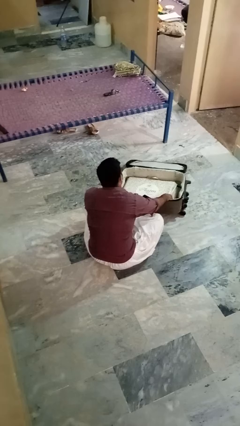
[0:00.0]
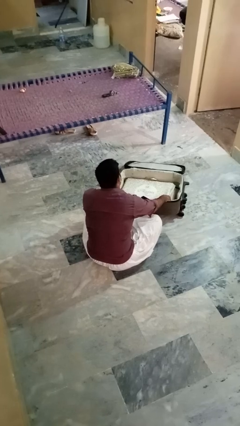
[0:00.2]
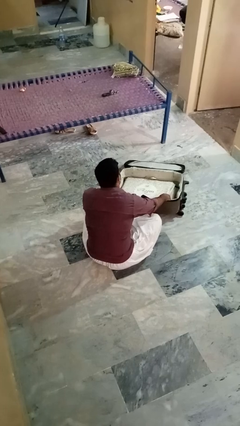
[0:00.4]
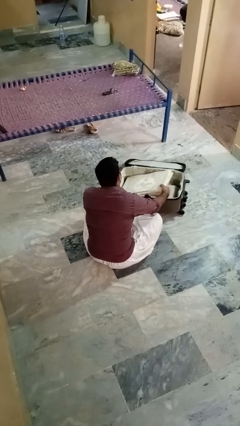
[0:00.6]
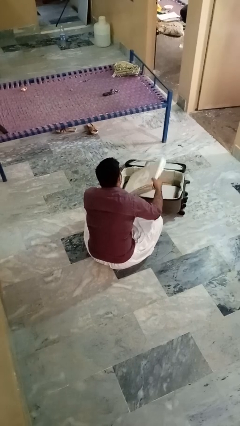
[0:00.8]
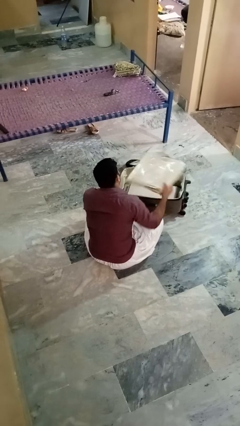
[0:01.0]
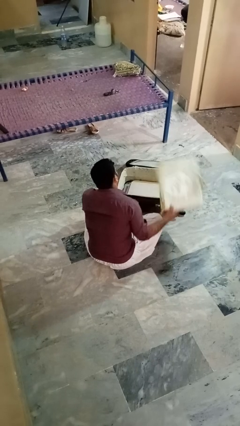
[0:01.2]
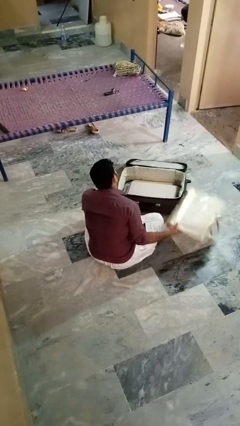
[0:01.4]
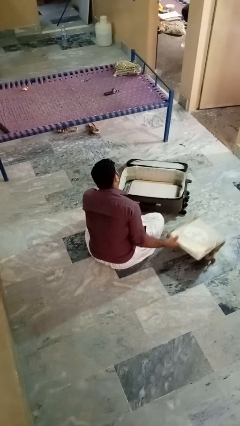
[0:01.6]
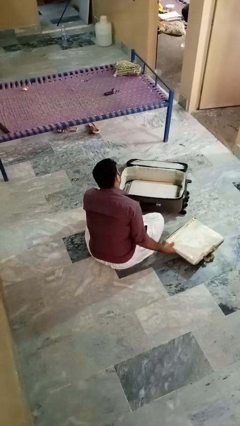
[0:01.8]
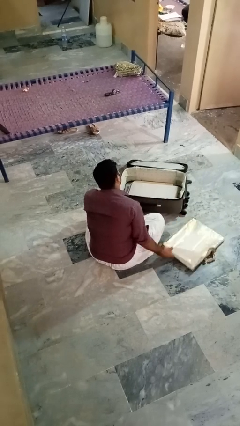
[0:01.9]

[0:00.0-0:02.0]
person takes object from bag

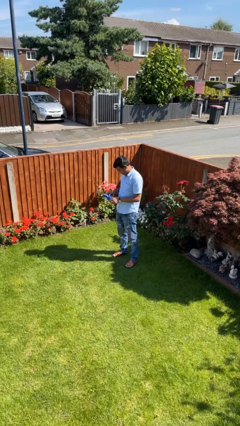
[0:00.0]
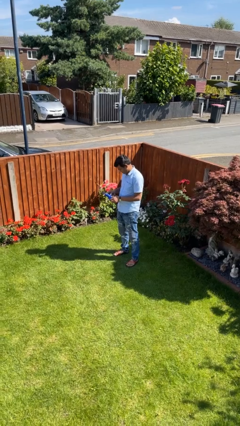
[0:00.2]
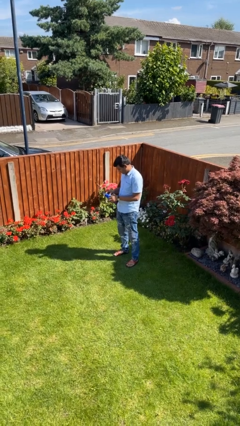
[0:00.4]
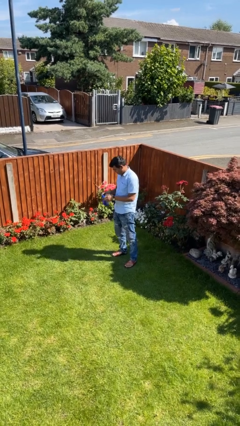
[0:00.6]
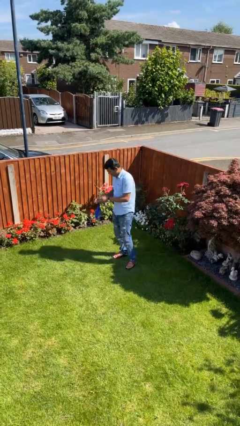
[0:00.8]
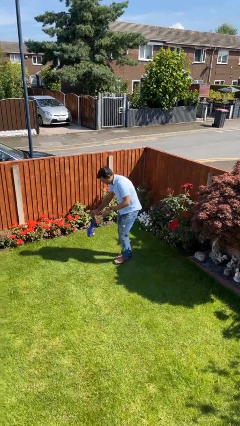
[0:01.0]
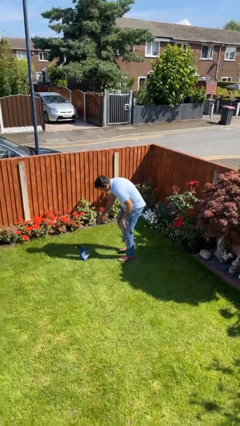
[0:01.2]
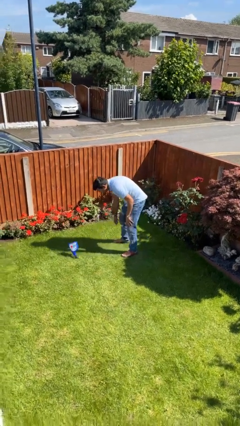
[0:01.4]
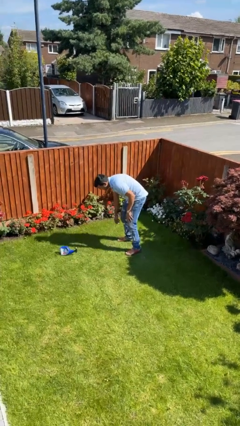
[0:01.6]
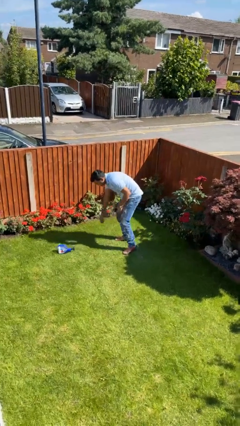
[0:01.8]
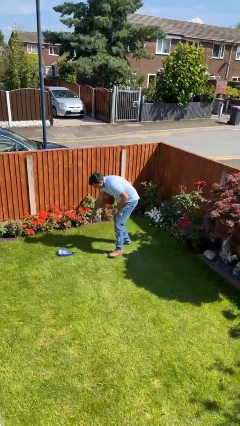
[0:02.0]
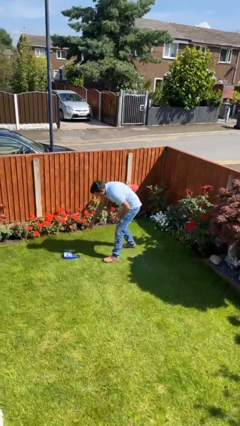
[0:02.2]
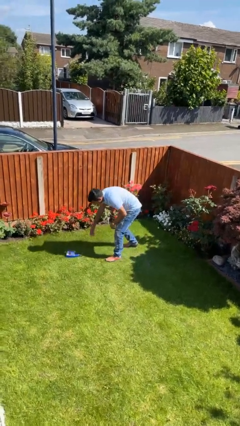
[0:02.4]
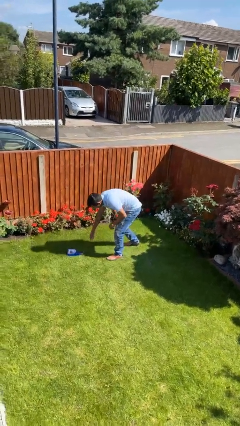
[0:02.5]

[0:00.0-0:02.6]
person drops object

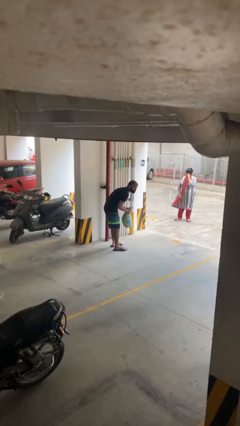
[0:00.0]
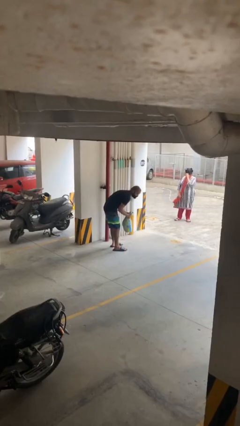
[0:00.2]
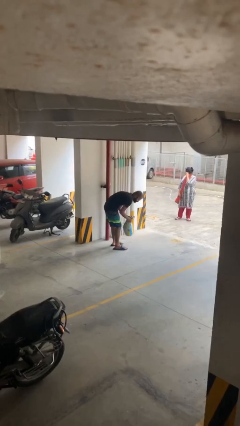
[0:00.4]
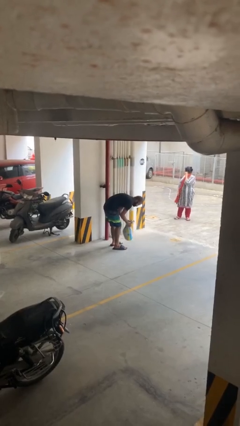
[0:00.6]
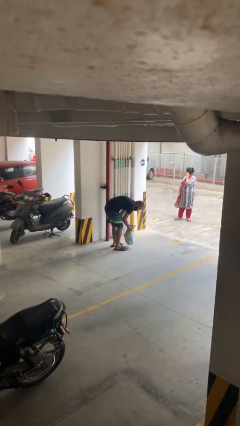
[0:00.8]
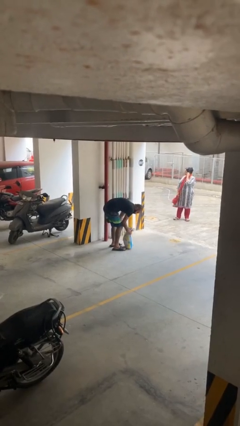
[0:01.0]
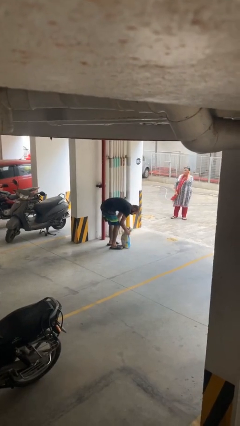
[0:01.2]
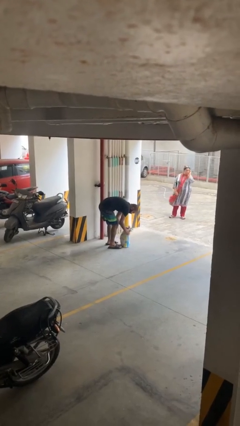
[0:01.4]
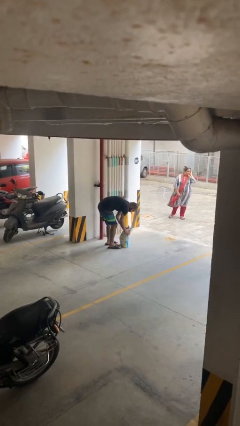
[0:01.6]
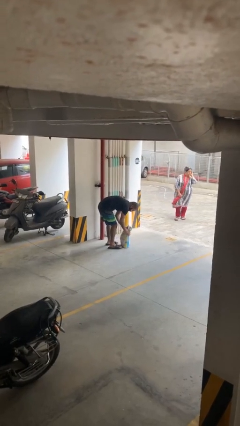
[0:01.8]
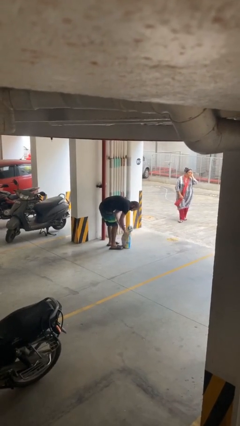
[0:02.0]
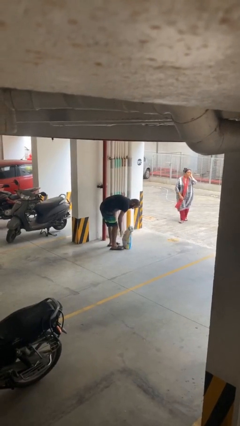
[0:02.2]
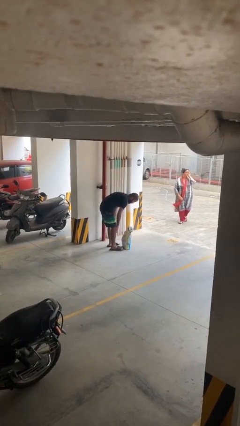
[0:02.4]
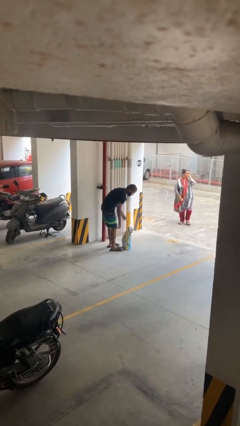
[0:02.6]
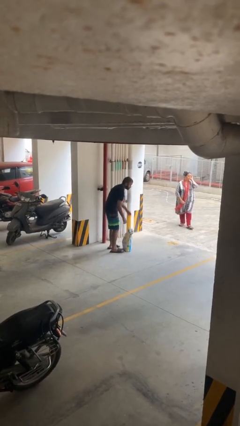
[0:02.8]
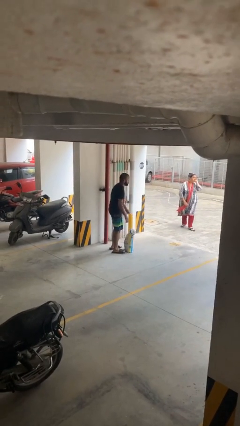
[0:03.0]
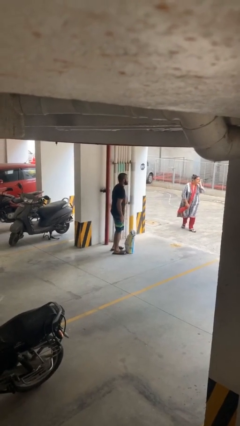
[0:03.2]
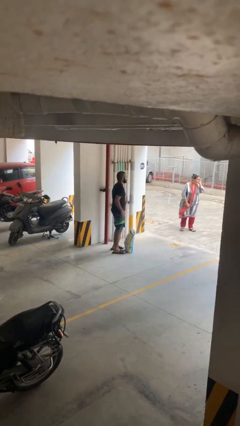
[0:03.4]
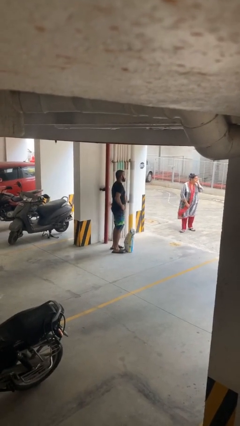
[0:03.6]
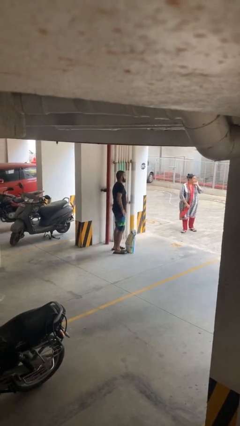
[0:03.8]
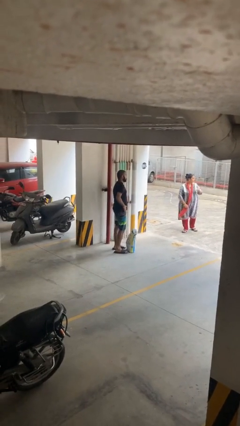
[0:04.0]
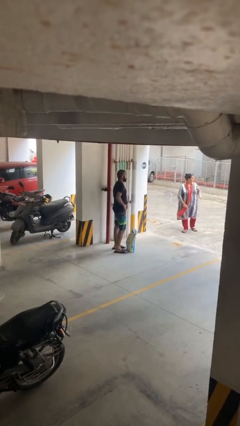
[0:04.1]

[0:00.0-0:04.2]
person puts down object on floor

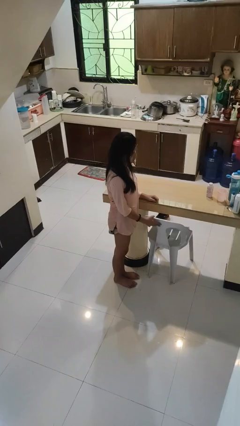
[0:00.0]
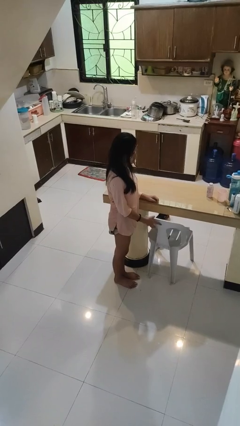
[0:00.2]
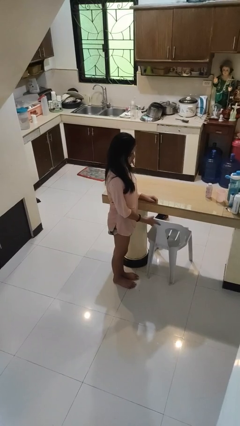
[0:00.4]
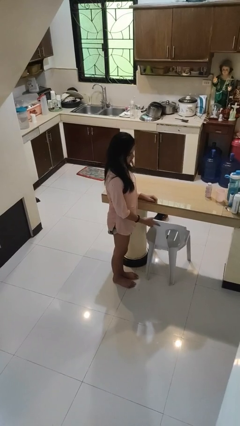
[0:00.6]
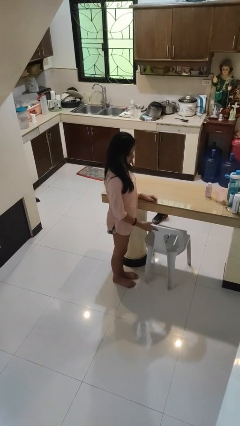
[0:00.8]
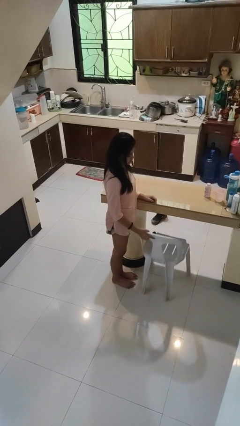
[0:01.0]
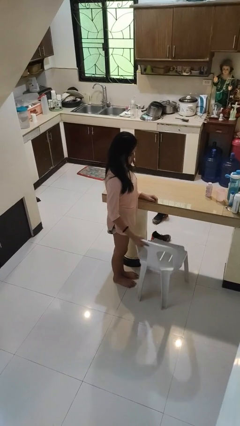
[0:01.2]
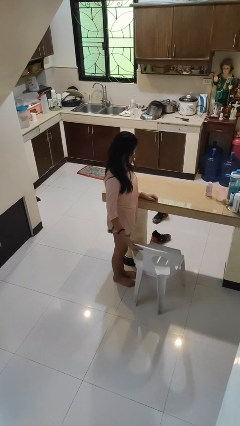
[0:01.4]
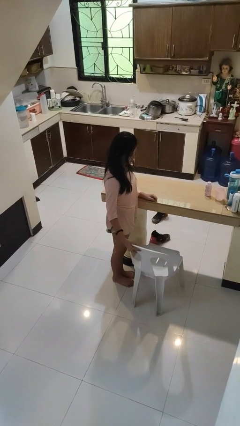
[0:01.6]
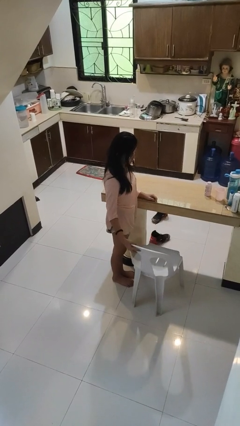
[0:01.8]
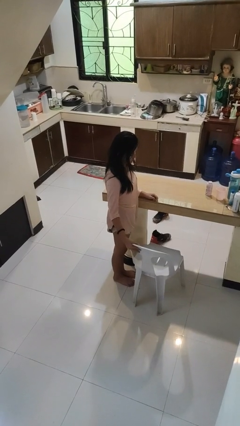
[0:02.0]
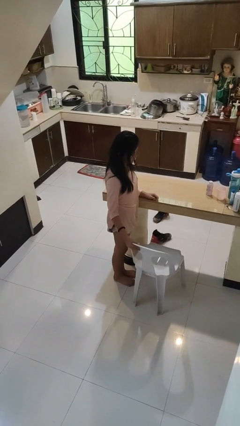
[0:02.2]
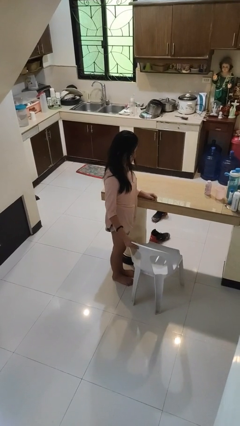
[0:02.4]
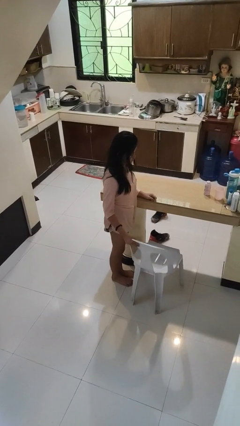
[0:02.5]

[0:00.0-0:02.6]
person pulls out chair

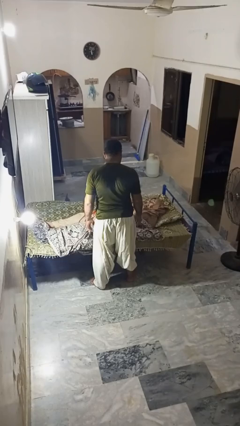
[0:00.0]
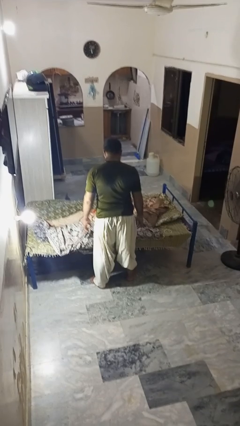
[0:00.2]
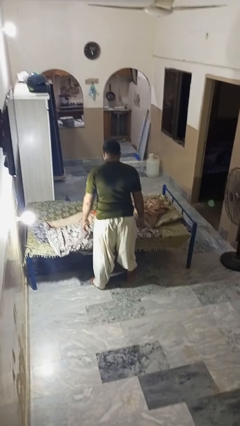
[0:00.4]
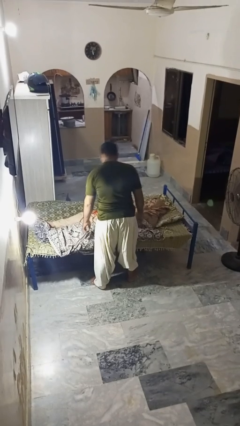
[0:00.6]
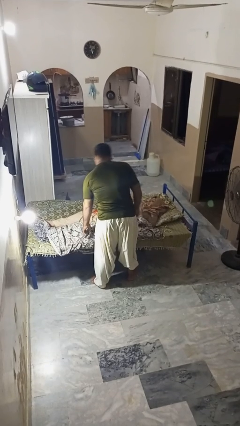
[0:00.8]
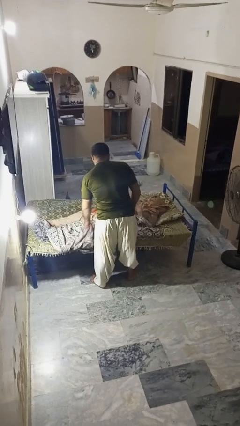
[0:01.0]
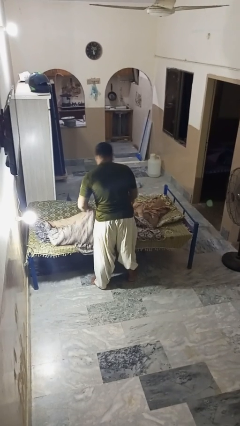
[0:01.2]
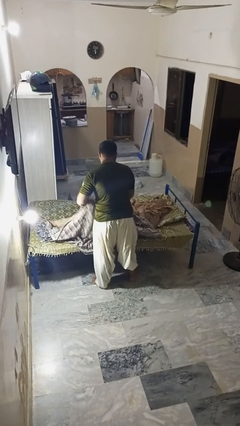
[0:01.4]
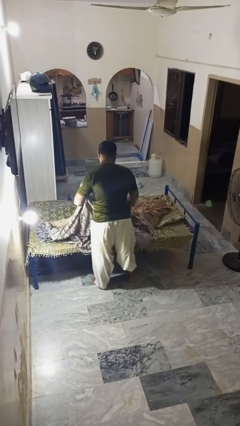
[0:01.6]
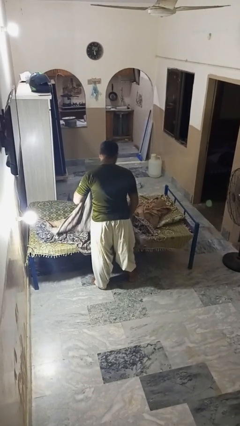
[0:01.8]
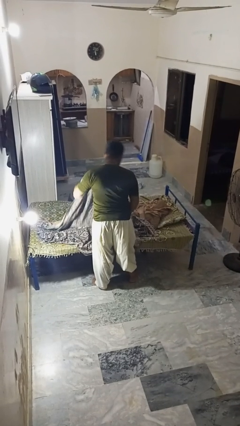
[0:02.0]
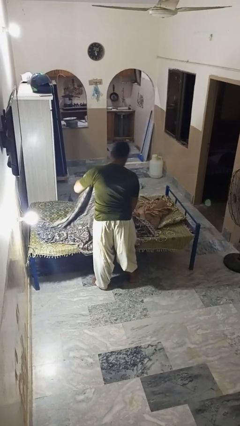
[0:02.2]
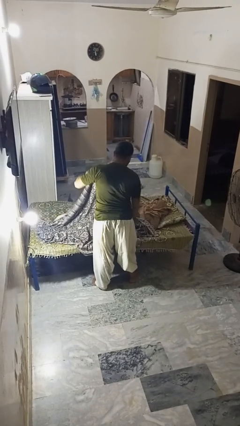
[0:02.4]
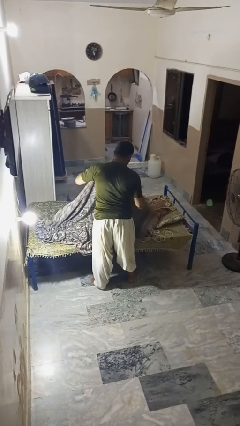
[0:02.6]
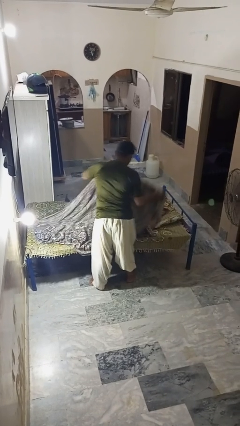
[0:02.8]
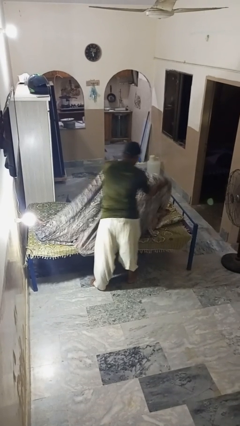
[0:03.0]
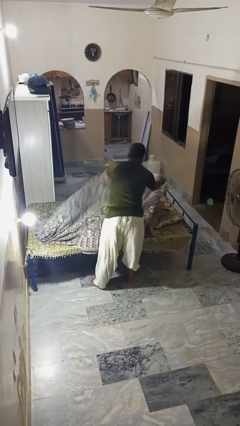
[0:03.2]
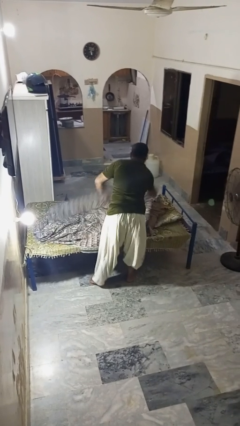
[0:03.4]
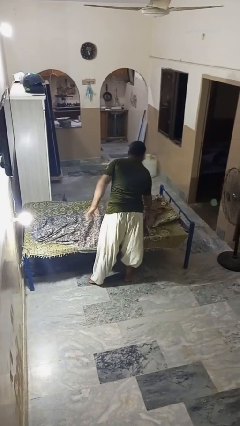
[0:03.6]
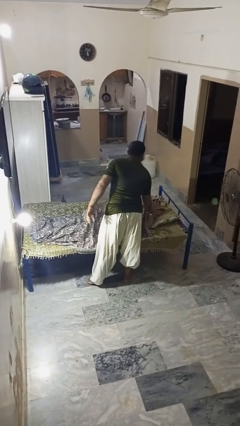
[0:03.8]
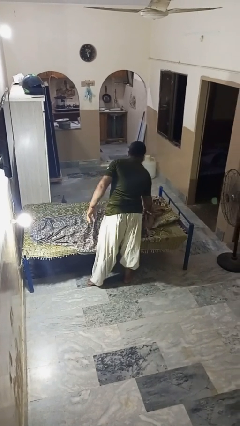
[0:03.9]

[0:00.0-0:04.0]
person covers friend with blanket

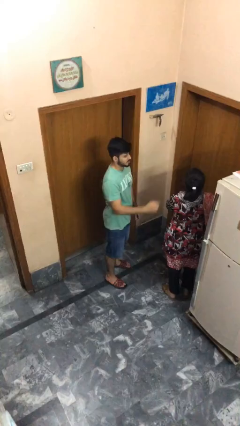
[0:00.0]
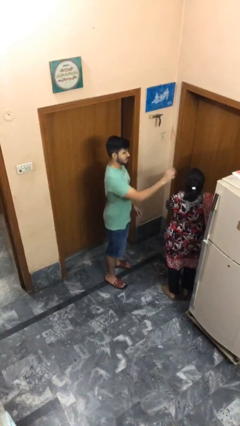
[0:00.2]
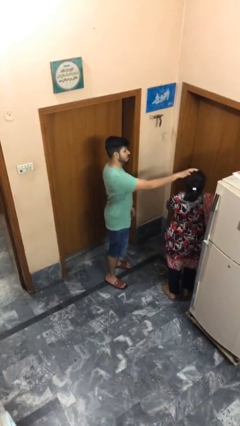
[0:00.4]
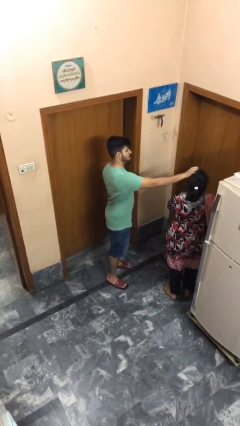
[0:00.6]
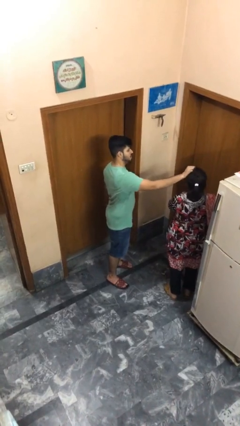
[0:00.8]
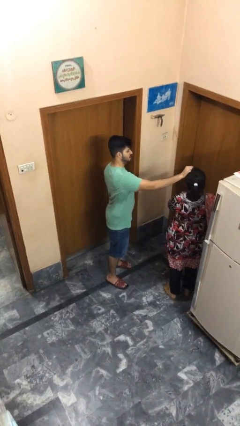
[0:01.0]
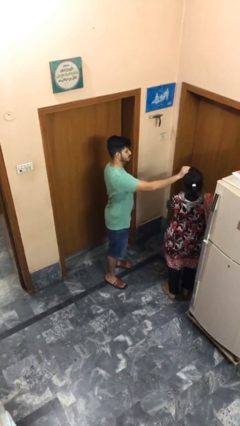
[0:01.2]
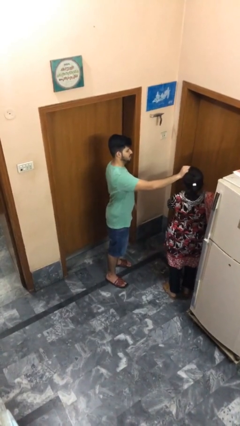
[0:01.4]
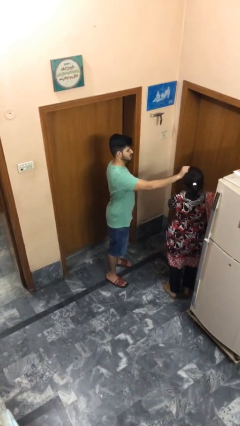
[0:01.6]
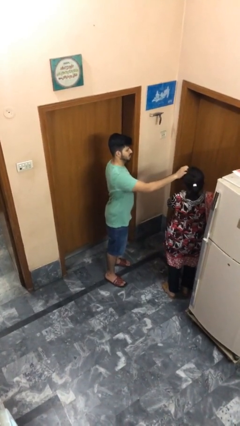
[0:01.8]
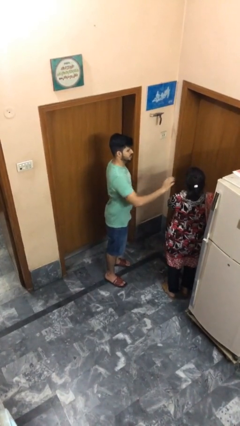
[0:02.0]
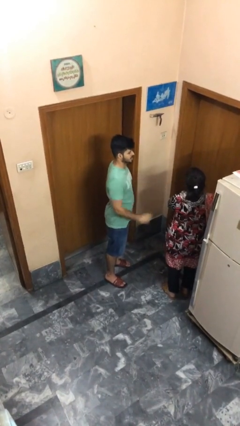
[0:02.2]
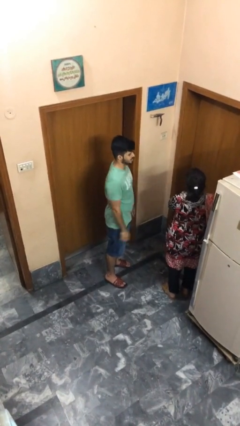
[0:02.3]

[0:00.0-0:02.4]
person grabs person by hair
